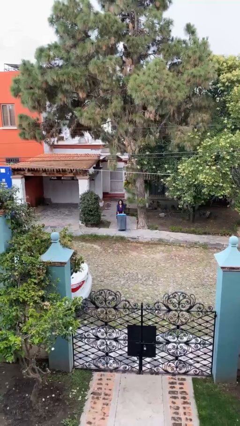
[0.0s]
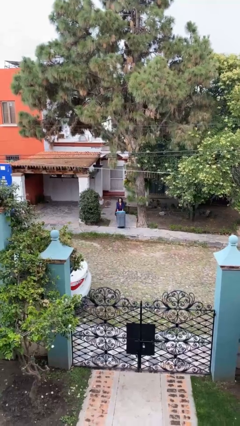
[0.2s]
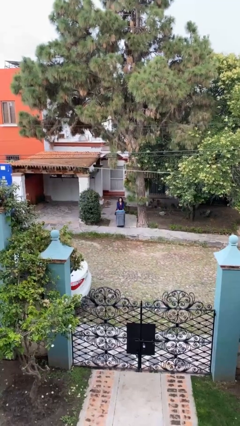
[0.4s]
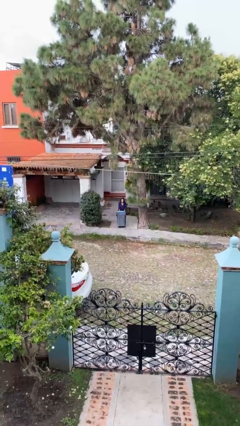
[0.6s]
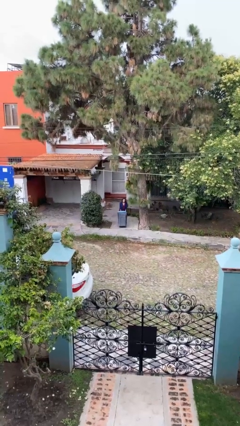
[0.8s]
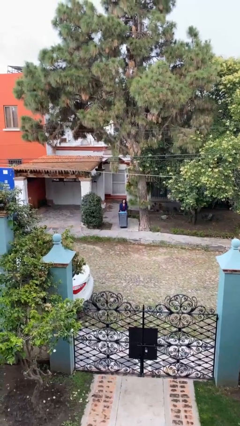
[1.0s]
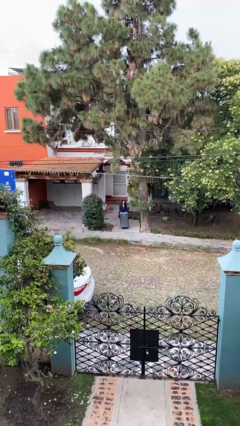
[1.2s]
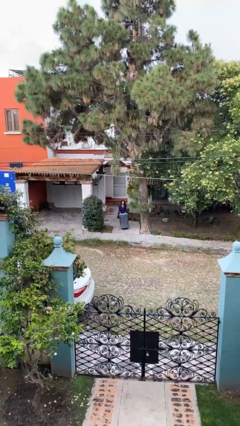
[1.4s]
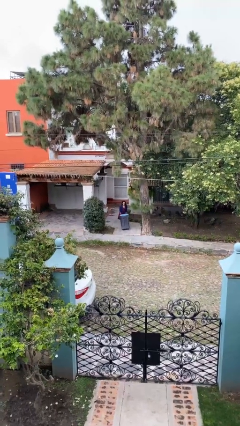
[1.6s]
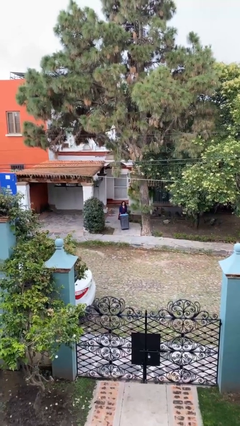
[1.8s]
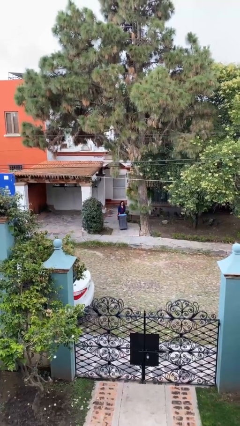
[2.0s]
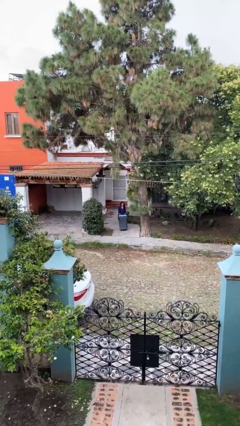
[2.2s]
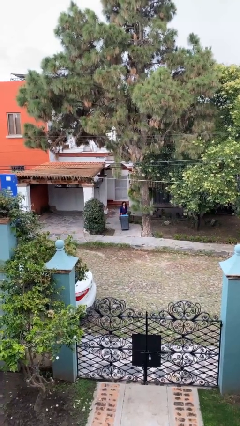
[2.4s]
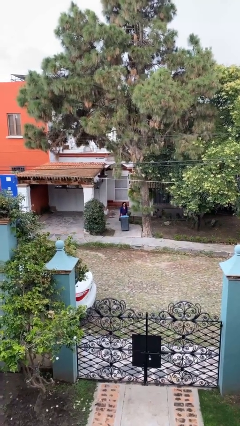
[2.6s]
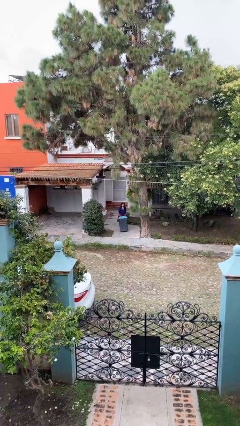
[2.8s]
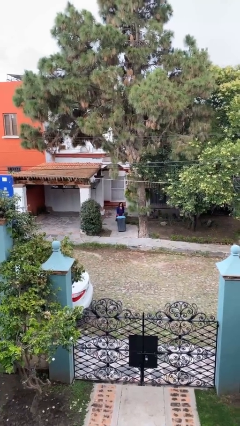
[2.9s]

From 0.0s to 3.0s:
person pulls wheeled trashcan

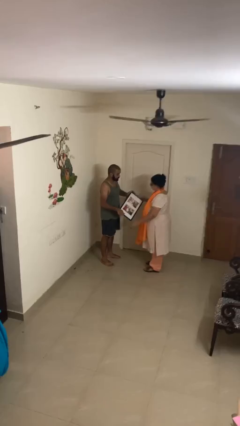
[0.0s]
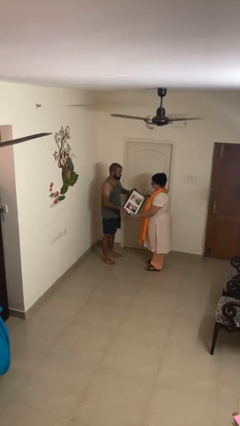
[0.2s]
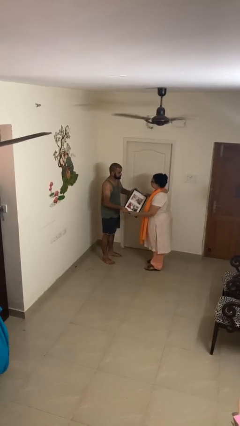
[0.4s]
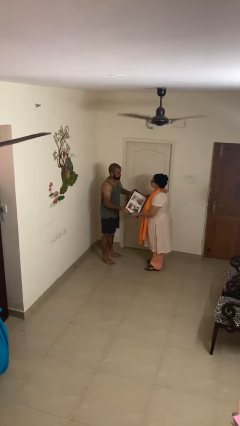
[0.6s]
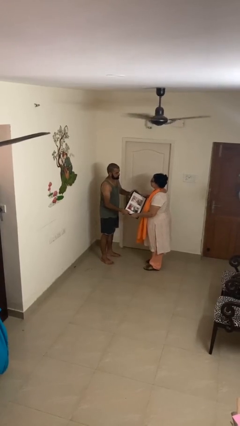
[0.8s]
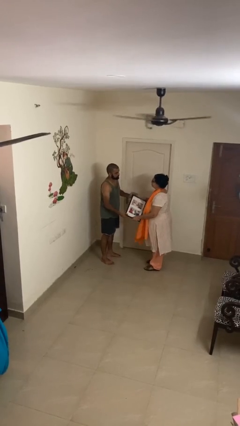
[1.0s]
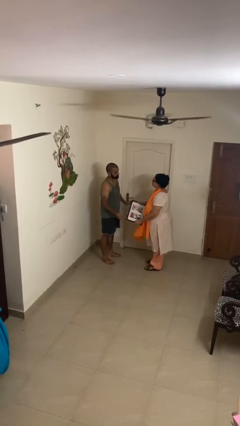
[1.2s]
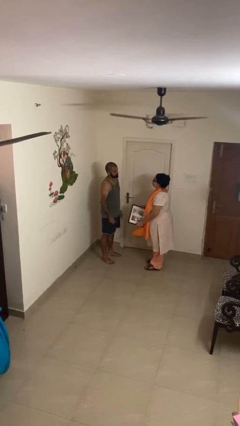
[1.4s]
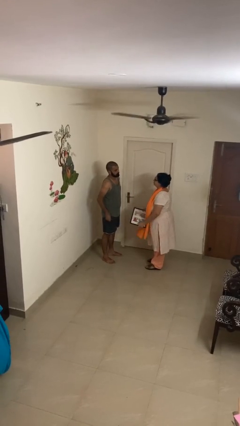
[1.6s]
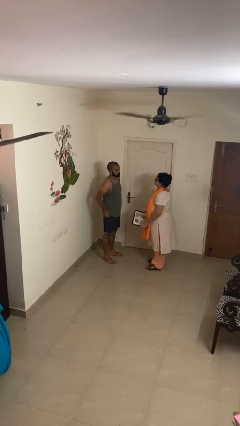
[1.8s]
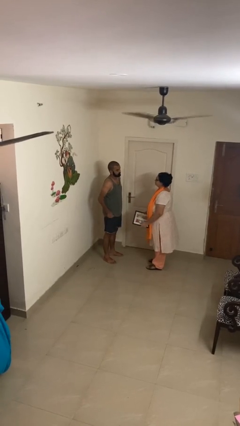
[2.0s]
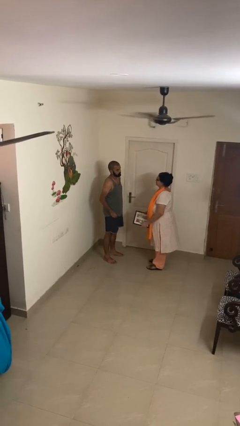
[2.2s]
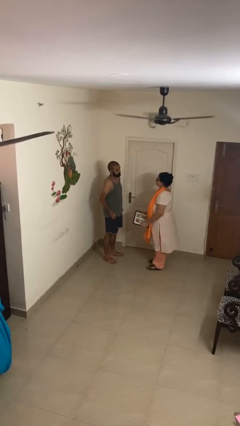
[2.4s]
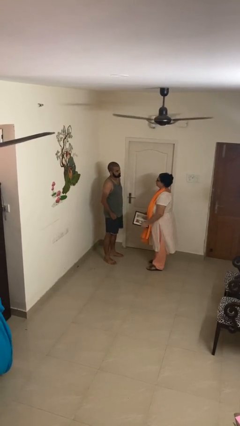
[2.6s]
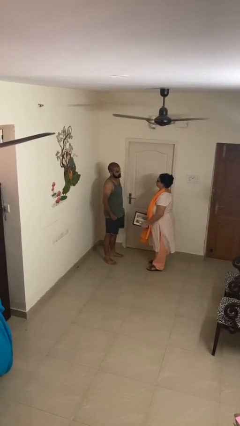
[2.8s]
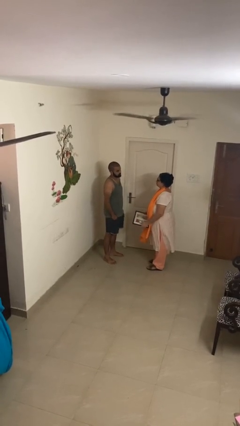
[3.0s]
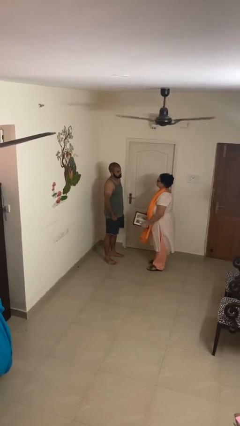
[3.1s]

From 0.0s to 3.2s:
person transfers object to person

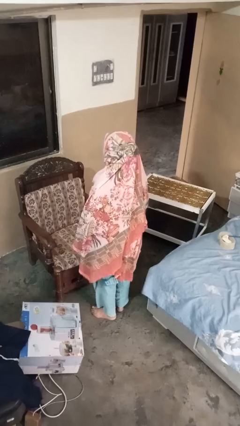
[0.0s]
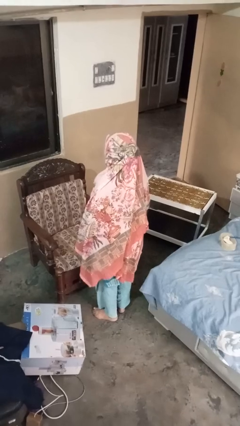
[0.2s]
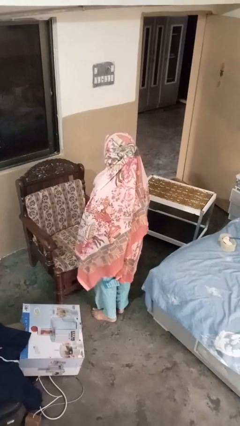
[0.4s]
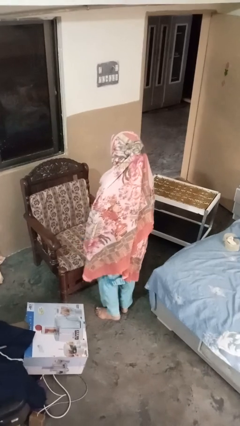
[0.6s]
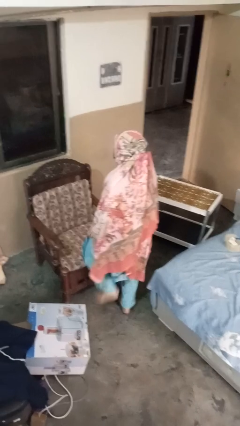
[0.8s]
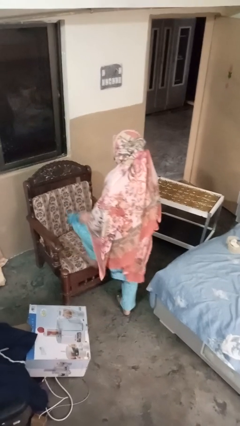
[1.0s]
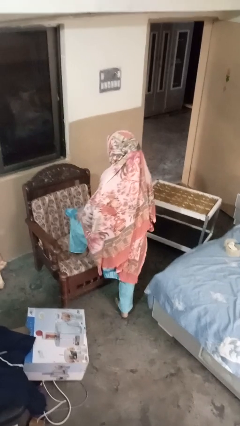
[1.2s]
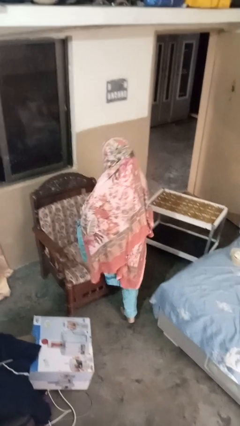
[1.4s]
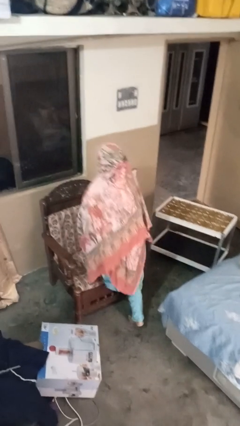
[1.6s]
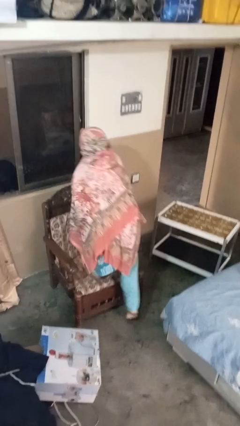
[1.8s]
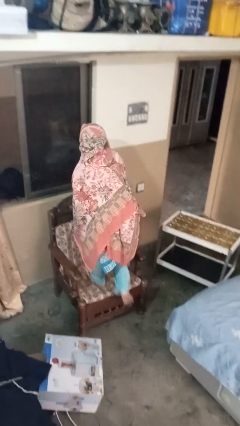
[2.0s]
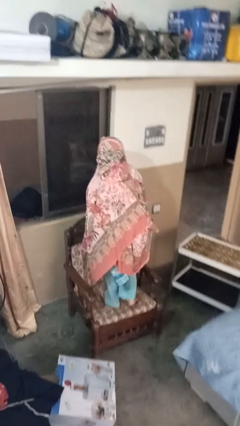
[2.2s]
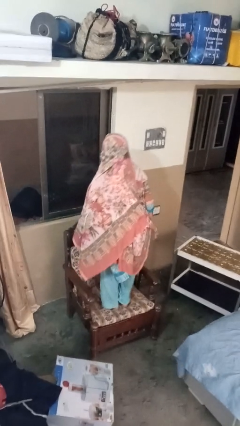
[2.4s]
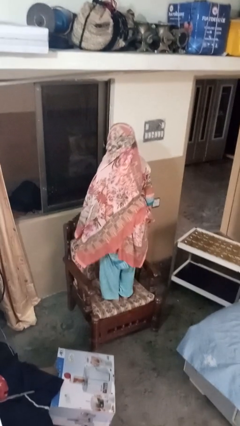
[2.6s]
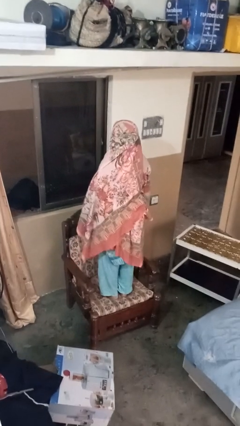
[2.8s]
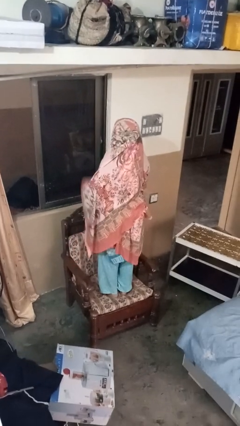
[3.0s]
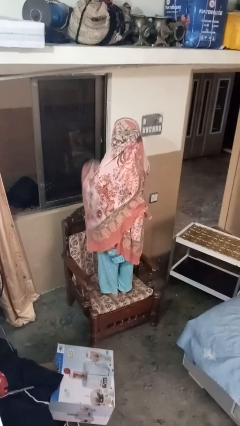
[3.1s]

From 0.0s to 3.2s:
person climbs on couch

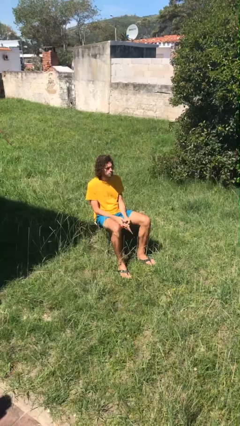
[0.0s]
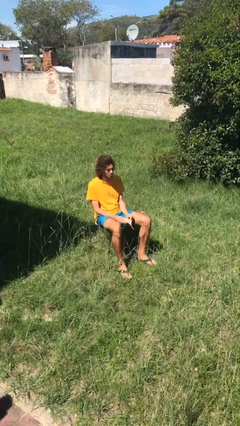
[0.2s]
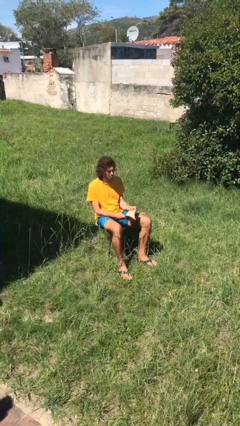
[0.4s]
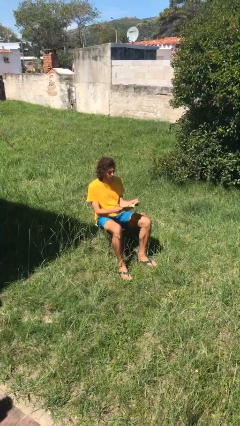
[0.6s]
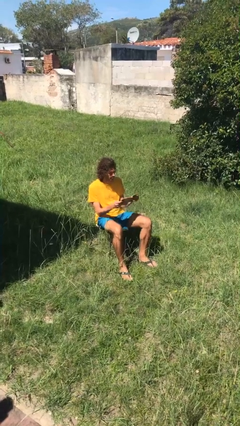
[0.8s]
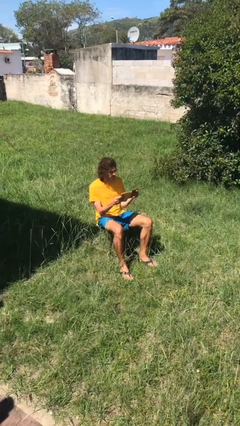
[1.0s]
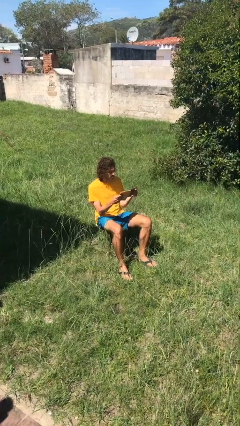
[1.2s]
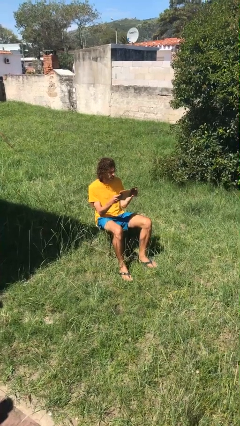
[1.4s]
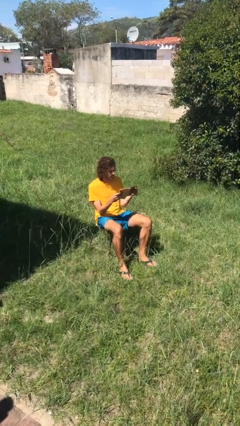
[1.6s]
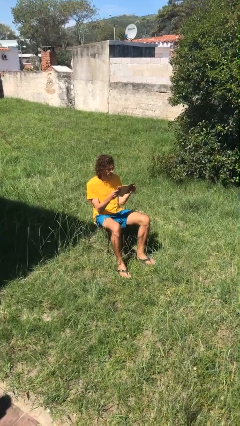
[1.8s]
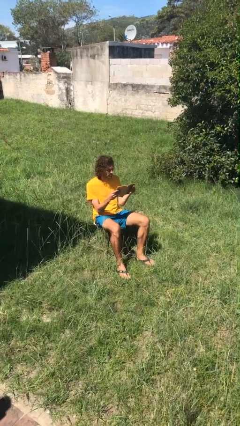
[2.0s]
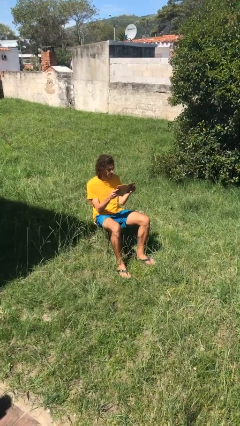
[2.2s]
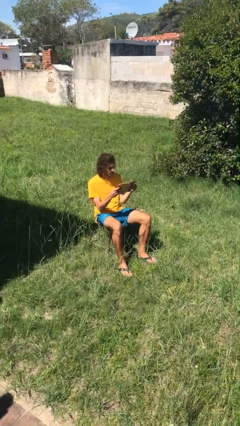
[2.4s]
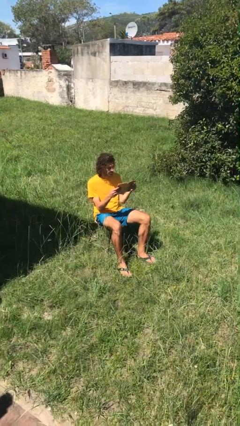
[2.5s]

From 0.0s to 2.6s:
person reads document

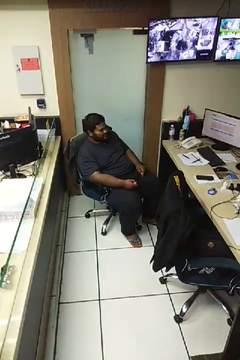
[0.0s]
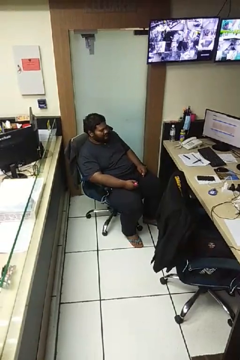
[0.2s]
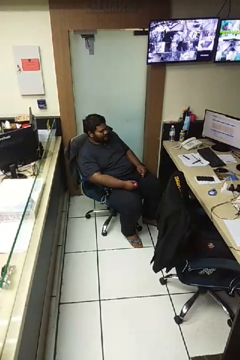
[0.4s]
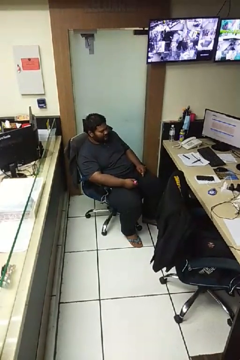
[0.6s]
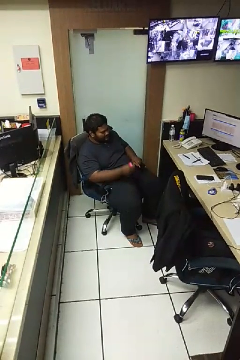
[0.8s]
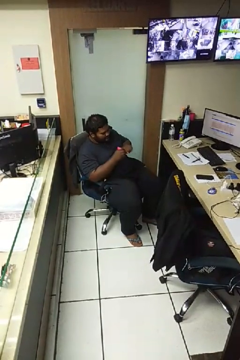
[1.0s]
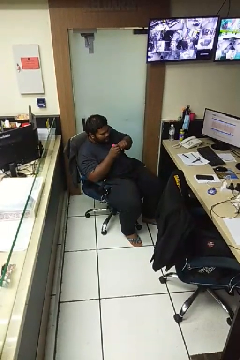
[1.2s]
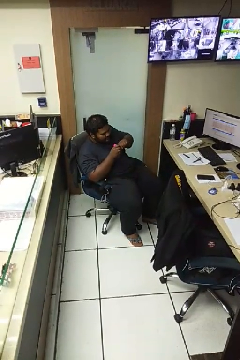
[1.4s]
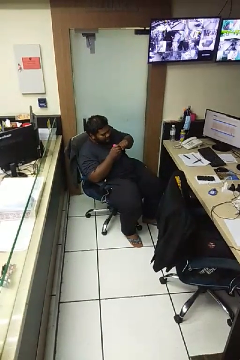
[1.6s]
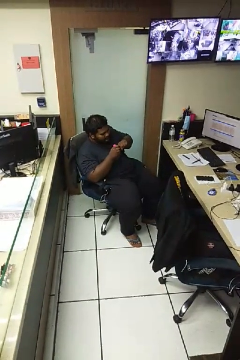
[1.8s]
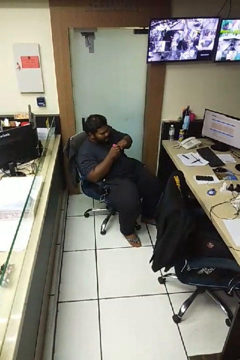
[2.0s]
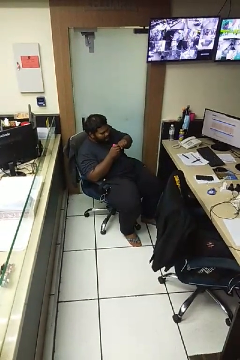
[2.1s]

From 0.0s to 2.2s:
person paints fingernails

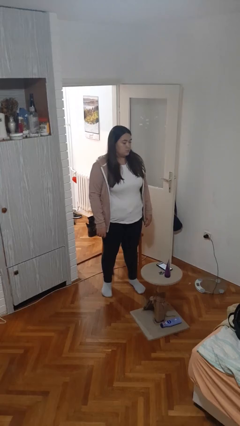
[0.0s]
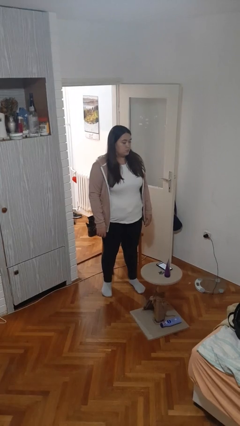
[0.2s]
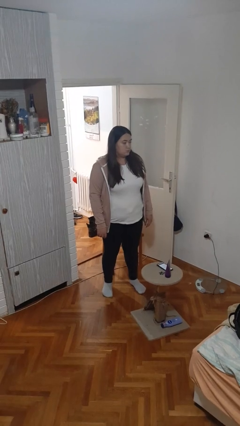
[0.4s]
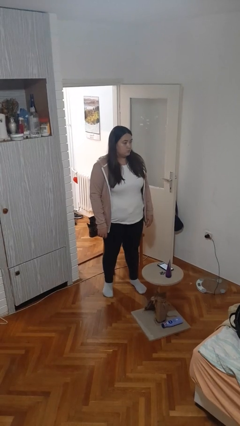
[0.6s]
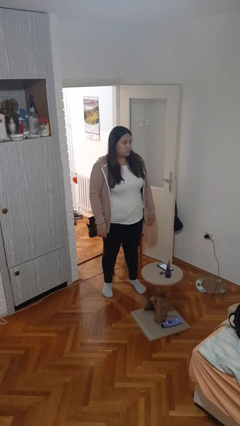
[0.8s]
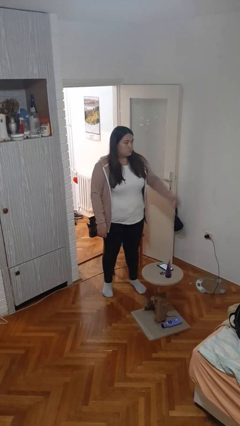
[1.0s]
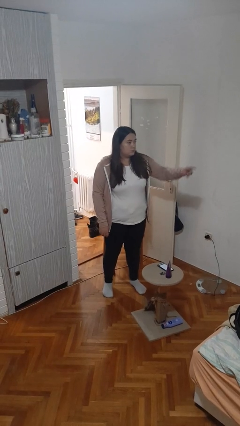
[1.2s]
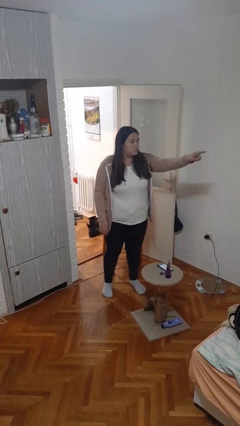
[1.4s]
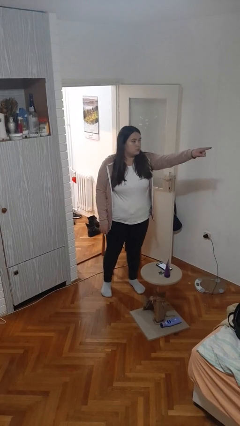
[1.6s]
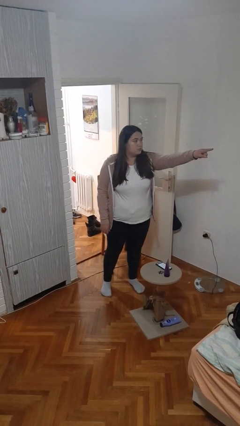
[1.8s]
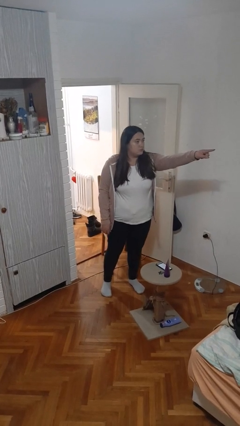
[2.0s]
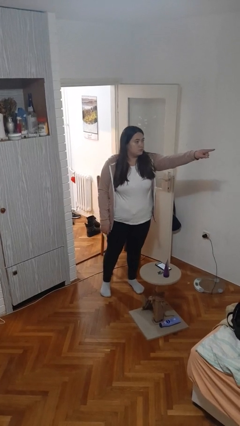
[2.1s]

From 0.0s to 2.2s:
person points at person

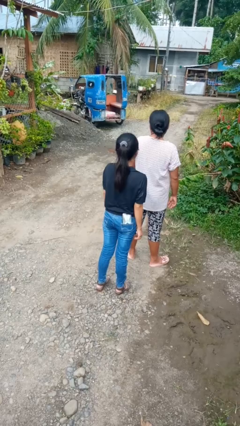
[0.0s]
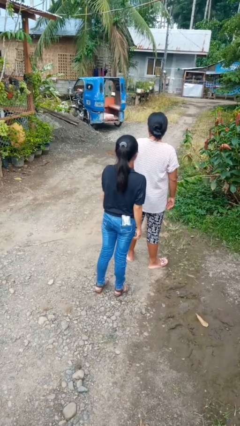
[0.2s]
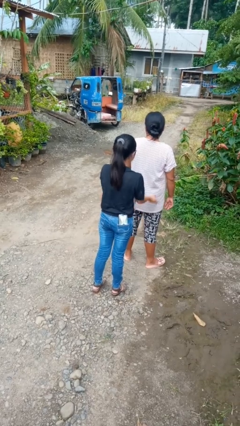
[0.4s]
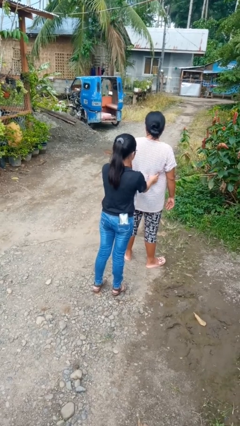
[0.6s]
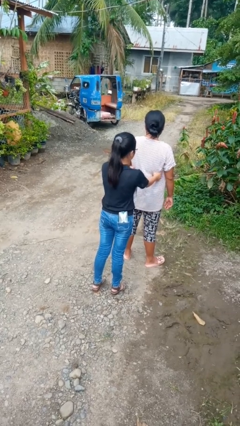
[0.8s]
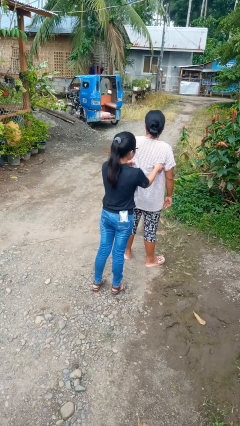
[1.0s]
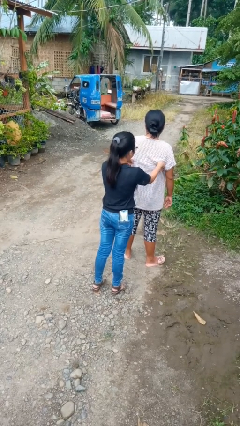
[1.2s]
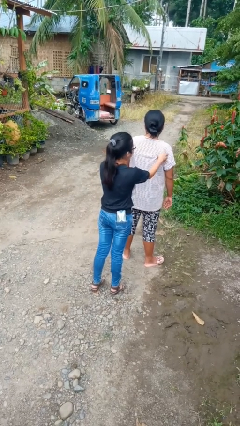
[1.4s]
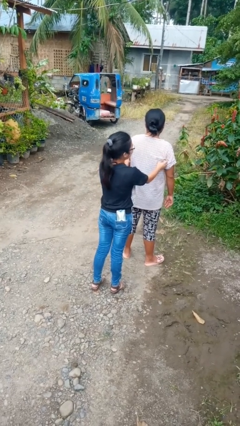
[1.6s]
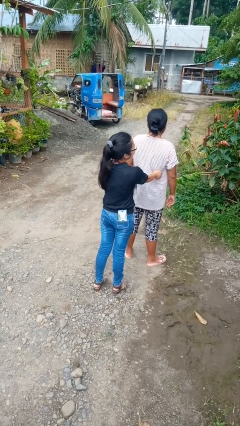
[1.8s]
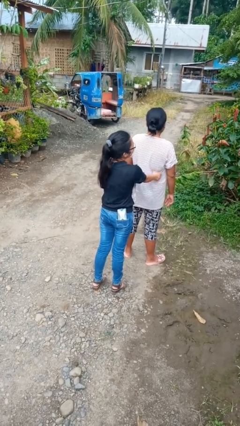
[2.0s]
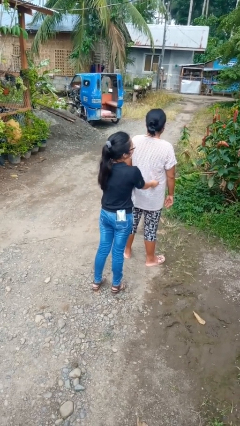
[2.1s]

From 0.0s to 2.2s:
person tickles person
